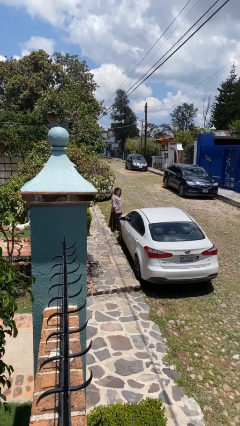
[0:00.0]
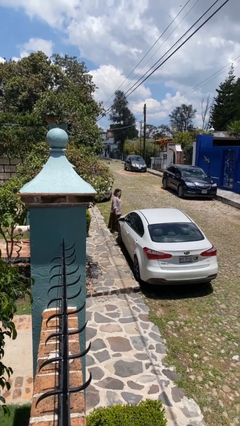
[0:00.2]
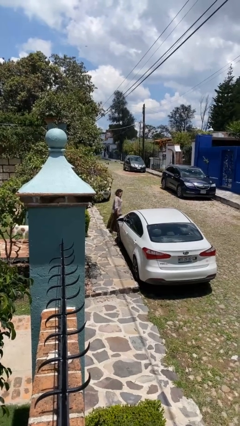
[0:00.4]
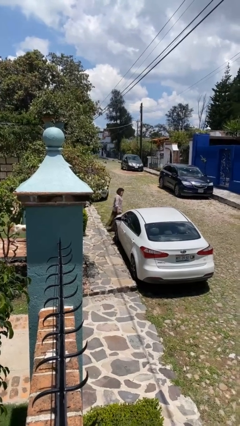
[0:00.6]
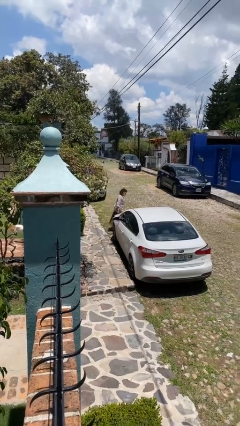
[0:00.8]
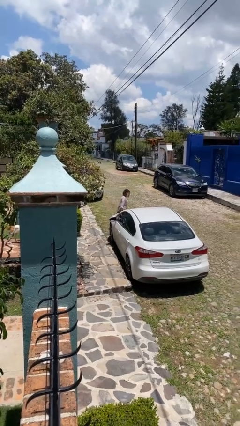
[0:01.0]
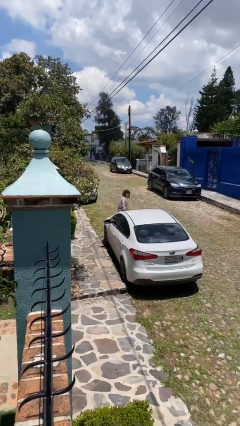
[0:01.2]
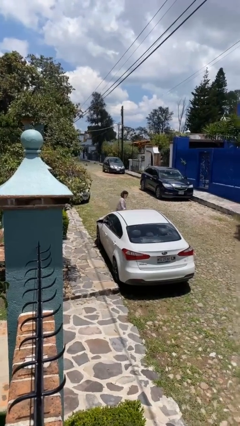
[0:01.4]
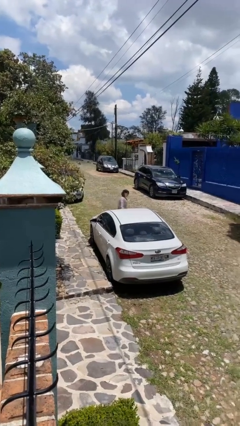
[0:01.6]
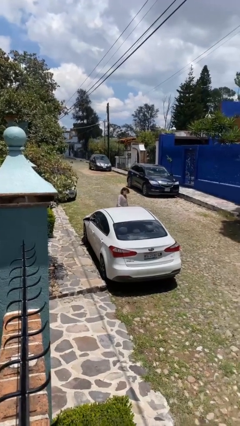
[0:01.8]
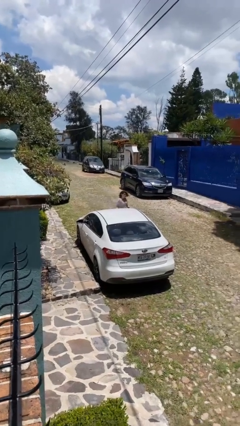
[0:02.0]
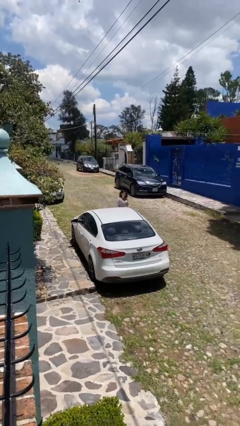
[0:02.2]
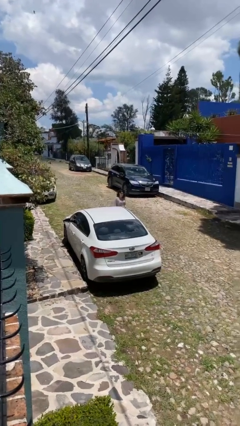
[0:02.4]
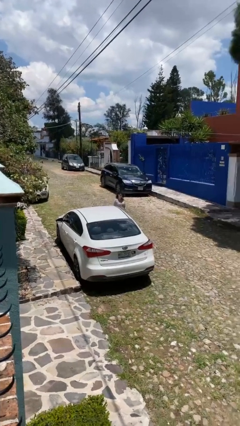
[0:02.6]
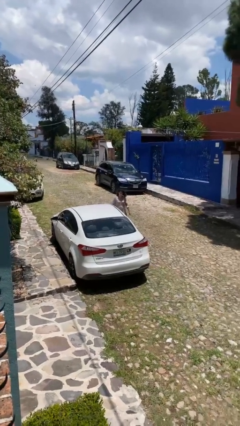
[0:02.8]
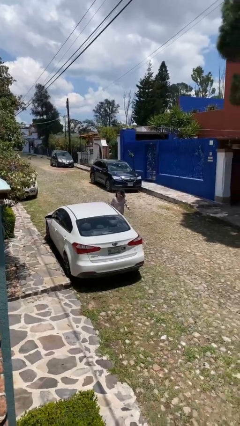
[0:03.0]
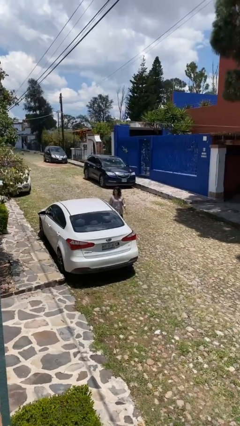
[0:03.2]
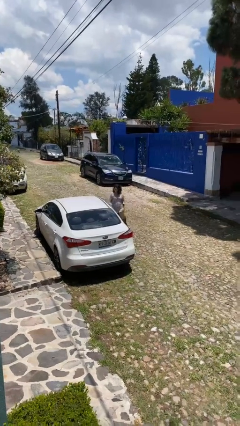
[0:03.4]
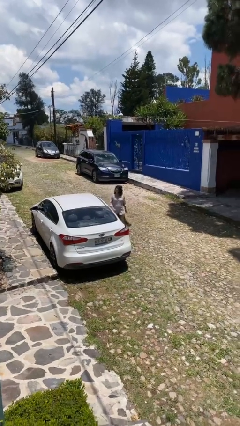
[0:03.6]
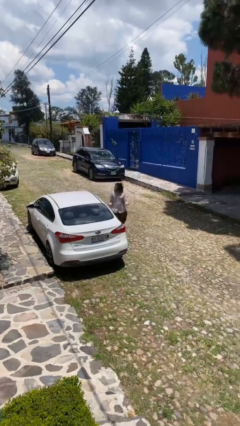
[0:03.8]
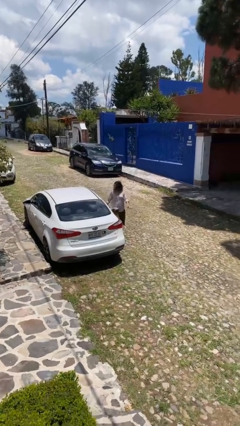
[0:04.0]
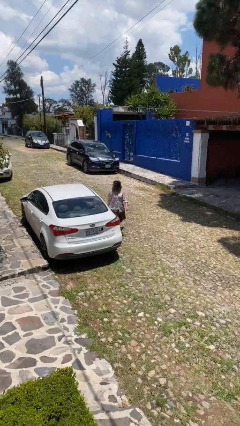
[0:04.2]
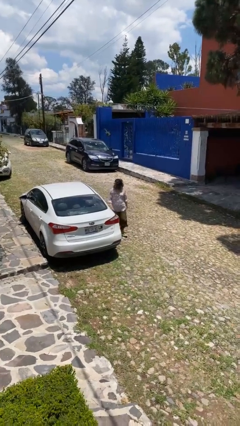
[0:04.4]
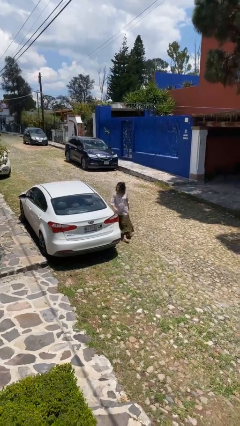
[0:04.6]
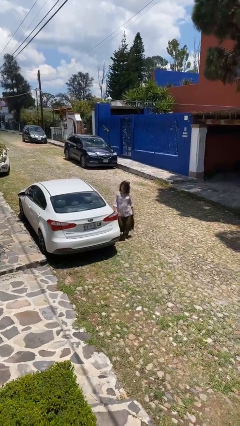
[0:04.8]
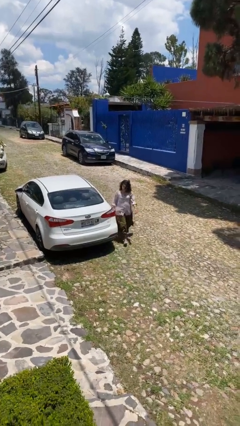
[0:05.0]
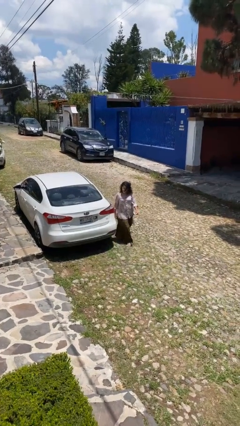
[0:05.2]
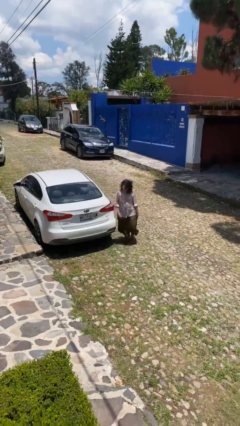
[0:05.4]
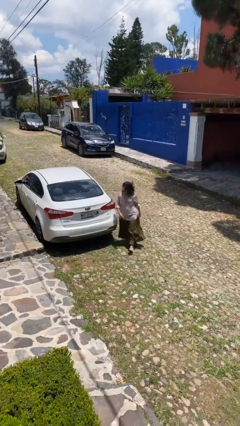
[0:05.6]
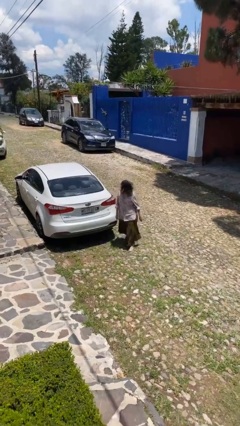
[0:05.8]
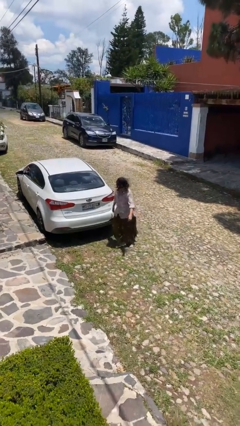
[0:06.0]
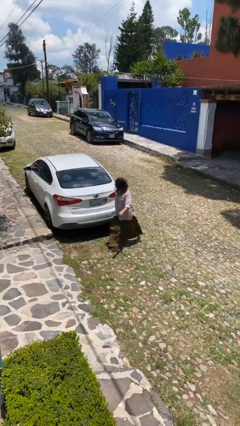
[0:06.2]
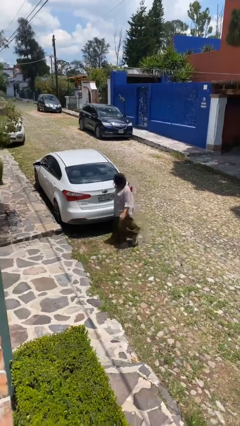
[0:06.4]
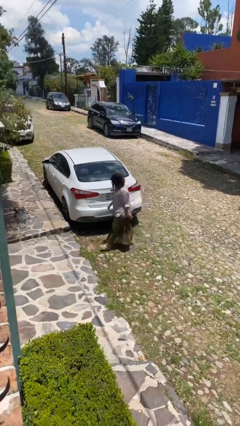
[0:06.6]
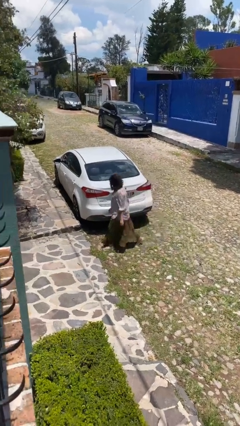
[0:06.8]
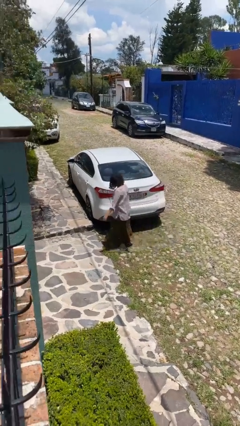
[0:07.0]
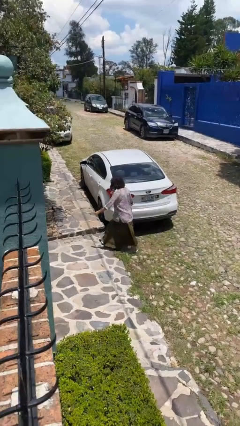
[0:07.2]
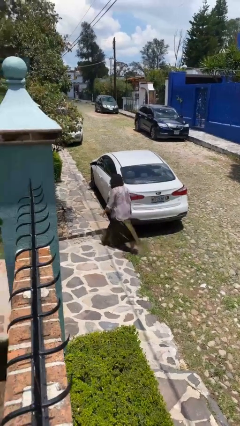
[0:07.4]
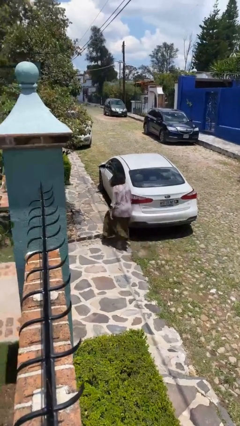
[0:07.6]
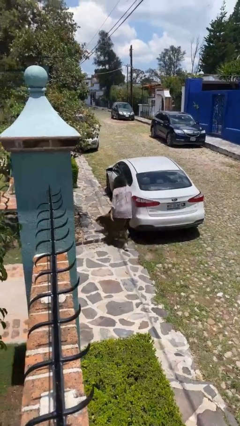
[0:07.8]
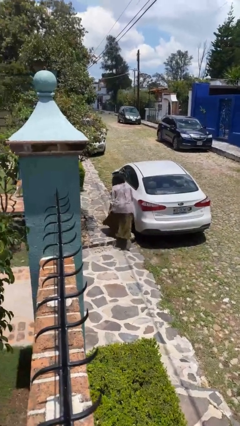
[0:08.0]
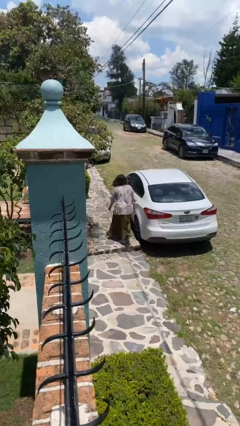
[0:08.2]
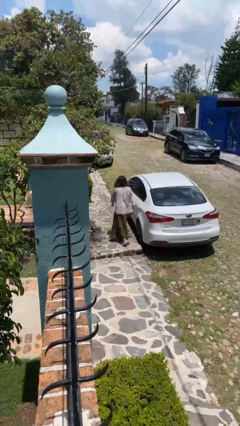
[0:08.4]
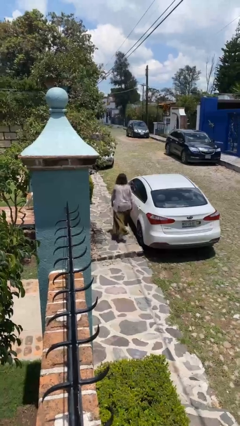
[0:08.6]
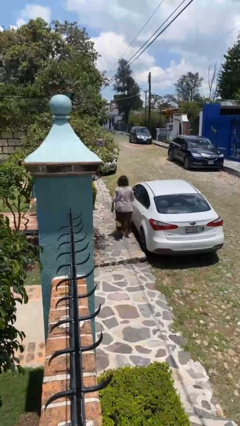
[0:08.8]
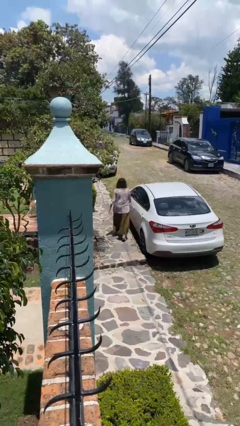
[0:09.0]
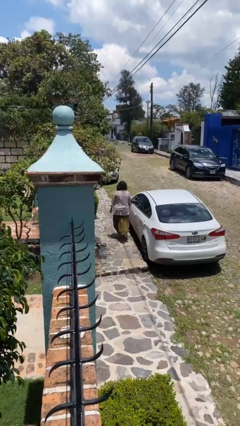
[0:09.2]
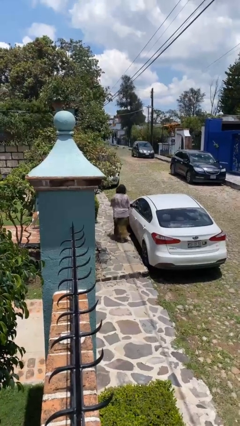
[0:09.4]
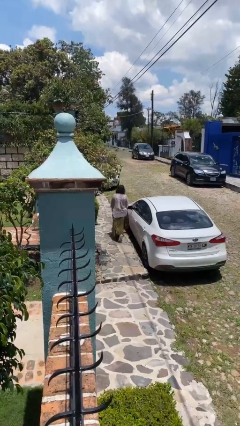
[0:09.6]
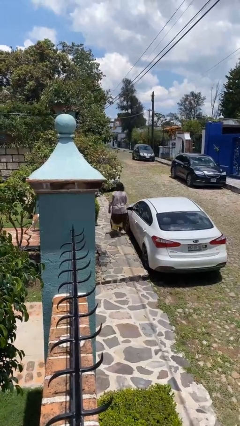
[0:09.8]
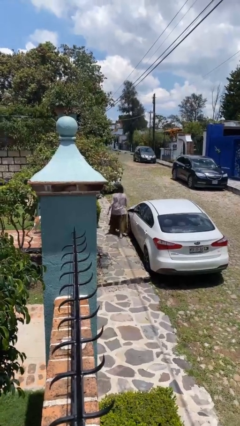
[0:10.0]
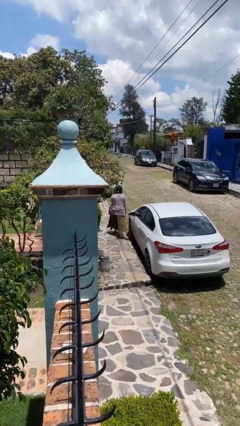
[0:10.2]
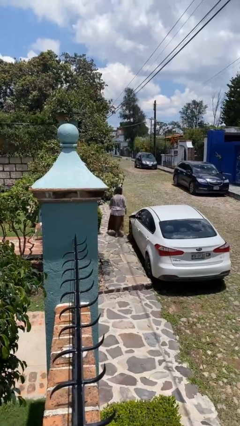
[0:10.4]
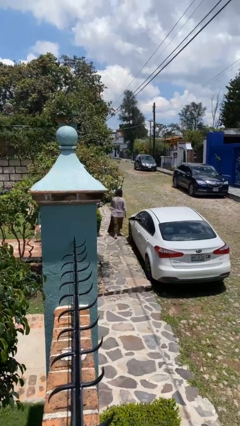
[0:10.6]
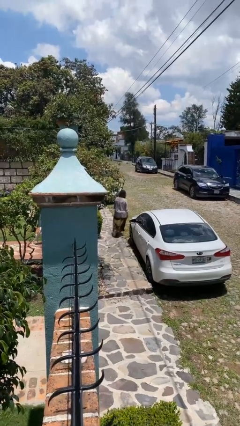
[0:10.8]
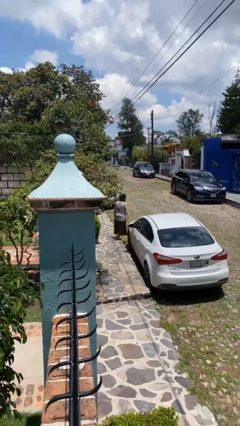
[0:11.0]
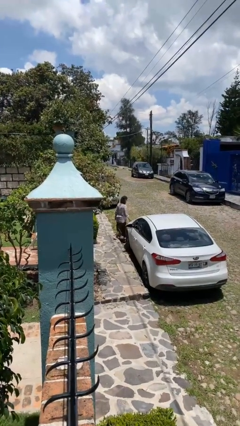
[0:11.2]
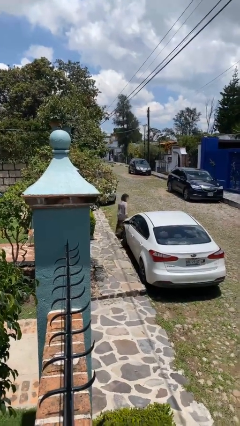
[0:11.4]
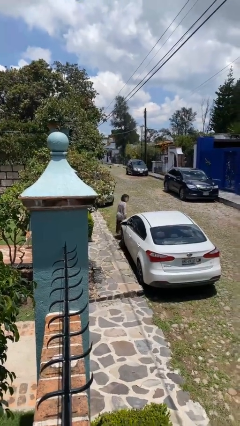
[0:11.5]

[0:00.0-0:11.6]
person walks around car

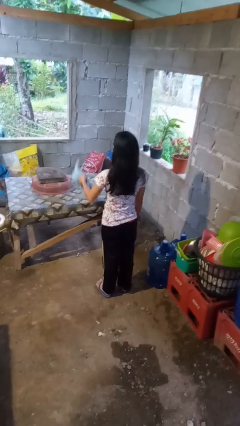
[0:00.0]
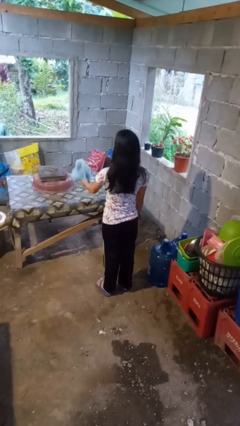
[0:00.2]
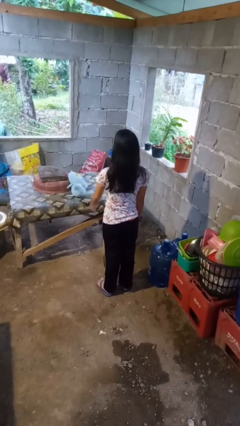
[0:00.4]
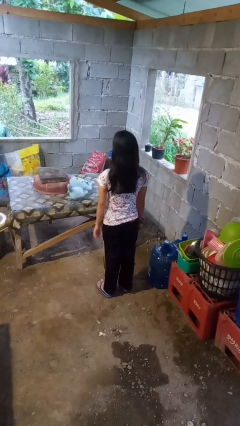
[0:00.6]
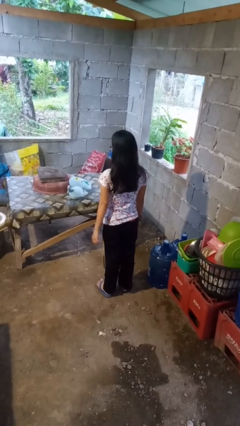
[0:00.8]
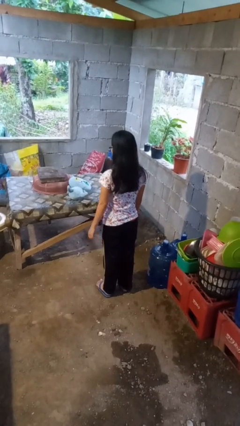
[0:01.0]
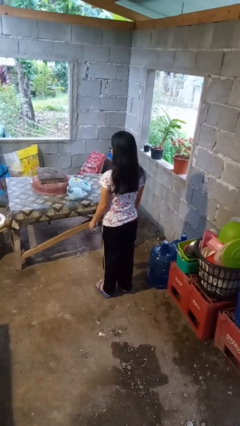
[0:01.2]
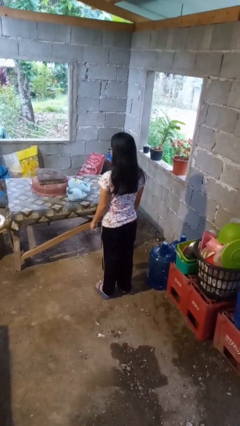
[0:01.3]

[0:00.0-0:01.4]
person throws object on table

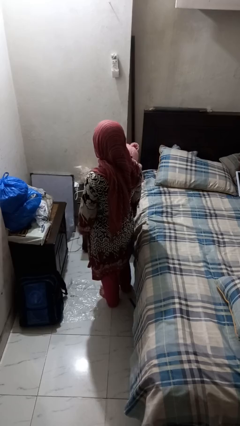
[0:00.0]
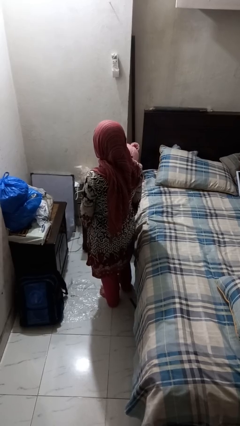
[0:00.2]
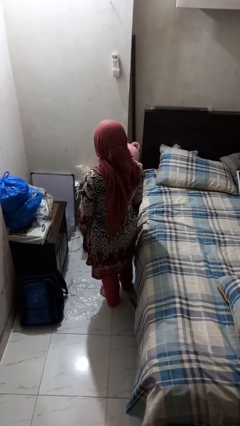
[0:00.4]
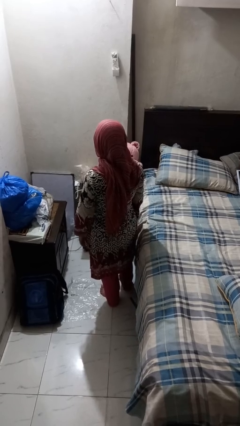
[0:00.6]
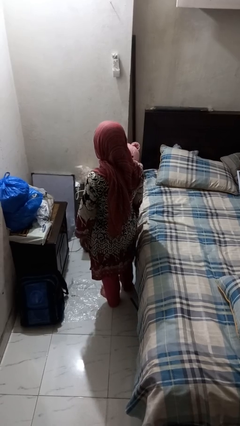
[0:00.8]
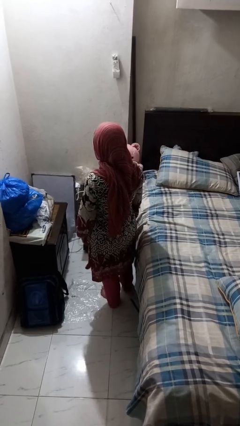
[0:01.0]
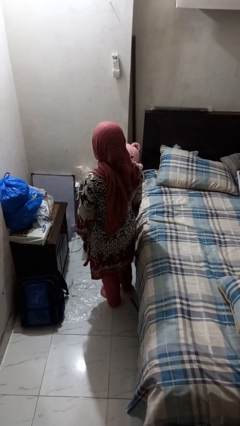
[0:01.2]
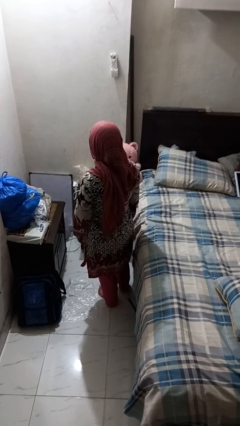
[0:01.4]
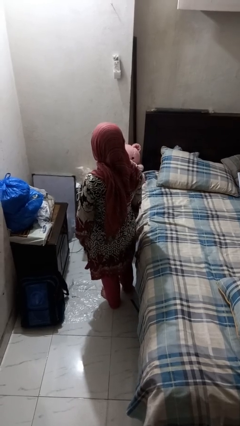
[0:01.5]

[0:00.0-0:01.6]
person swats bug

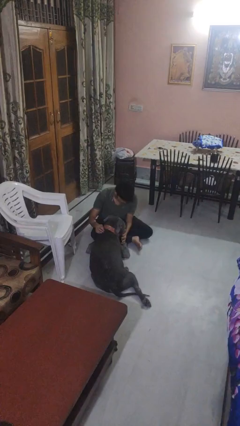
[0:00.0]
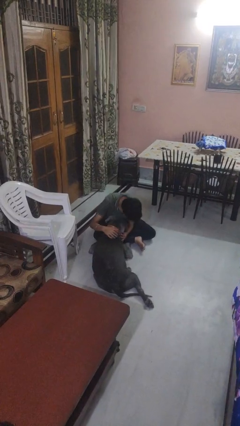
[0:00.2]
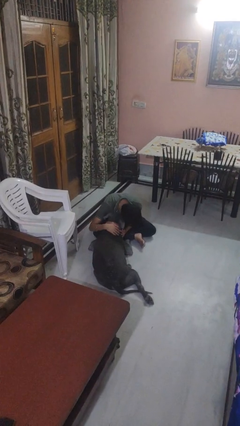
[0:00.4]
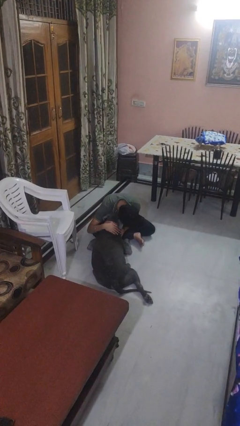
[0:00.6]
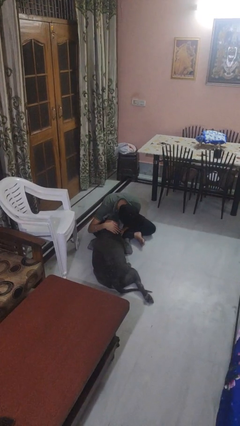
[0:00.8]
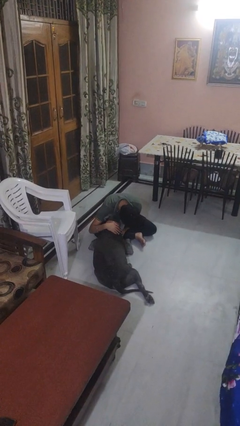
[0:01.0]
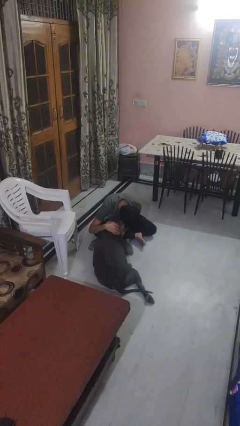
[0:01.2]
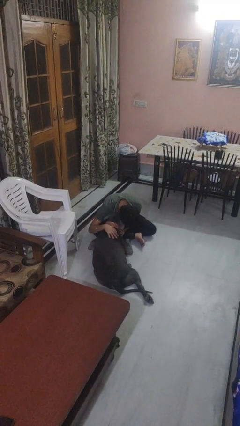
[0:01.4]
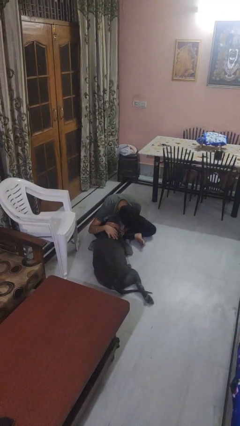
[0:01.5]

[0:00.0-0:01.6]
person hugs dog

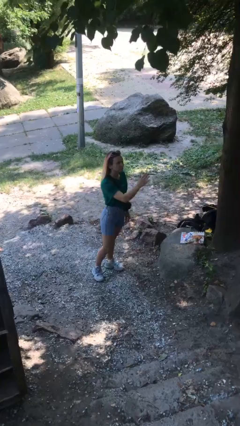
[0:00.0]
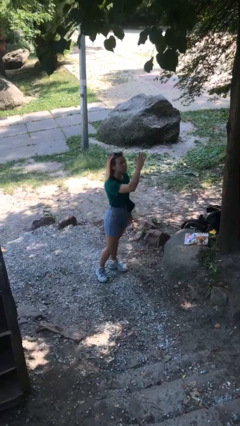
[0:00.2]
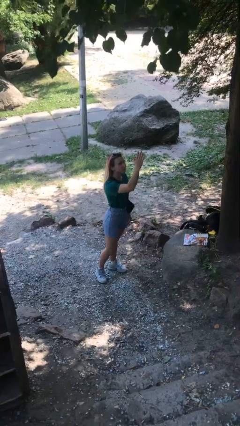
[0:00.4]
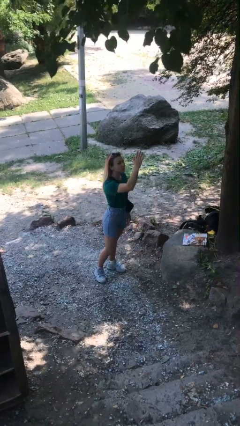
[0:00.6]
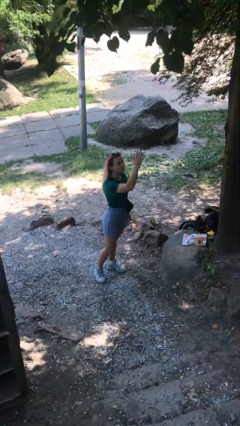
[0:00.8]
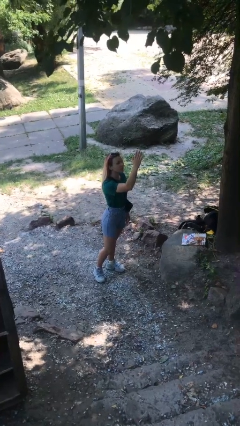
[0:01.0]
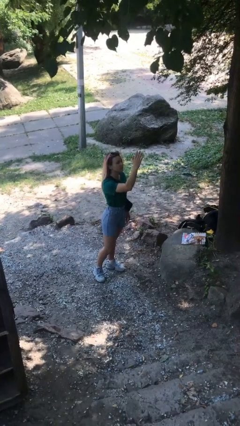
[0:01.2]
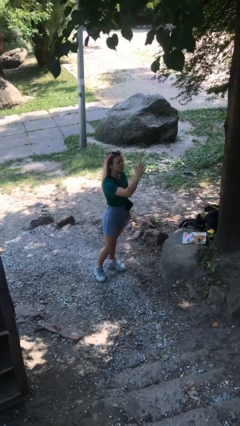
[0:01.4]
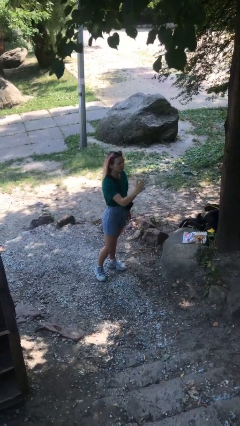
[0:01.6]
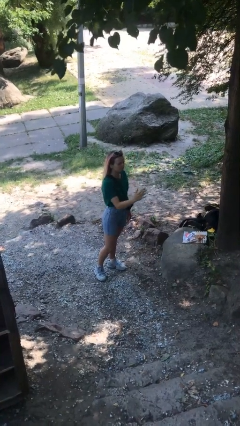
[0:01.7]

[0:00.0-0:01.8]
person gestures raise hand
